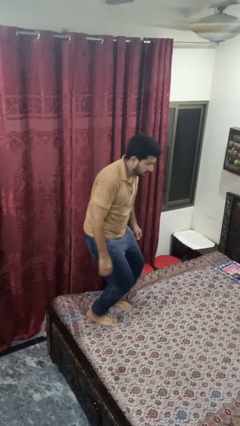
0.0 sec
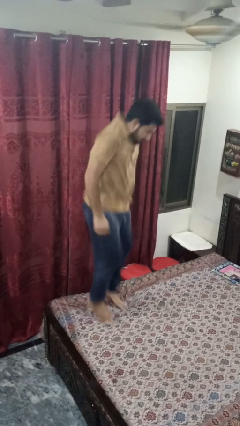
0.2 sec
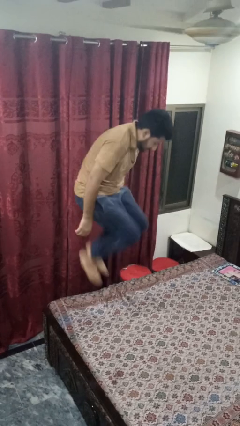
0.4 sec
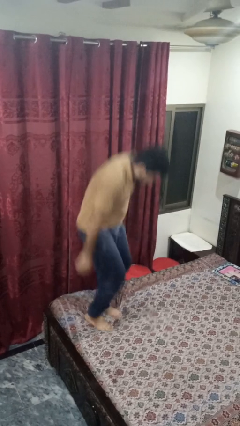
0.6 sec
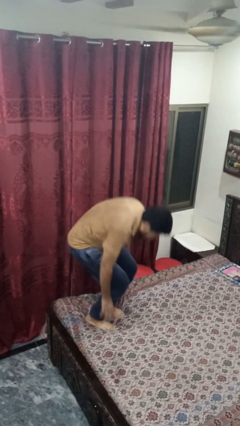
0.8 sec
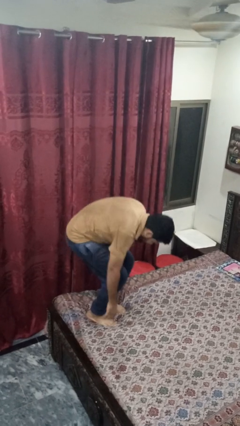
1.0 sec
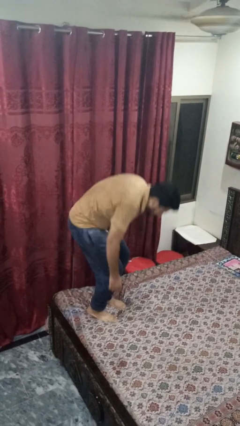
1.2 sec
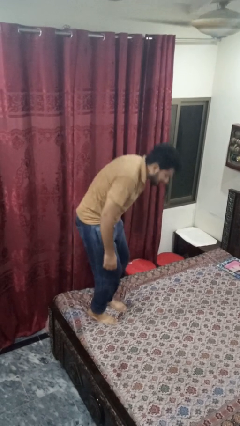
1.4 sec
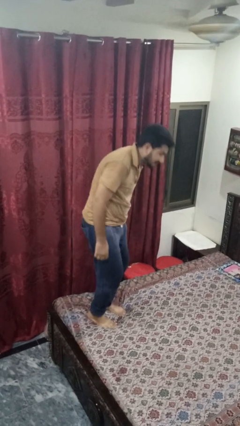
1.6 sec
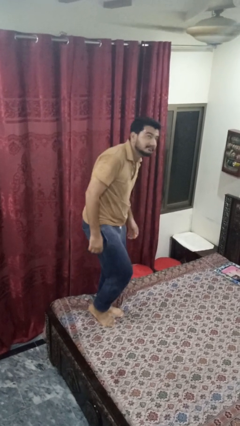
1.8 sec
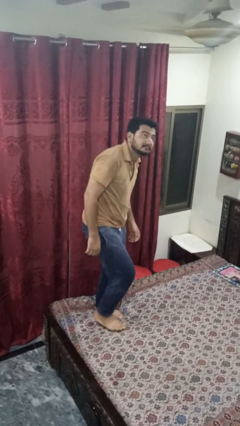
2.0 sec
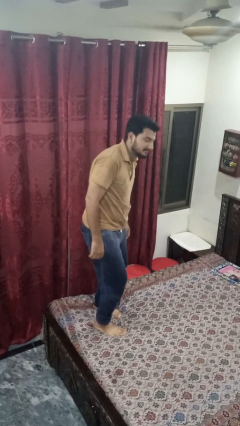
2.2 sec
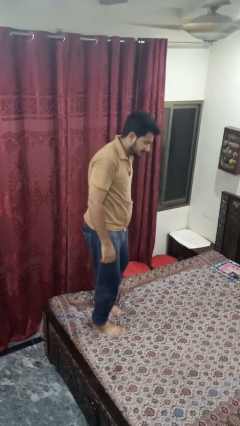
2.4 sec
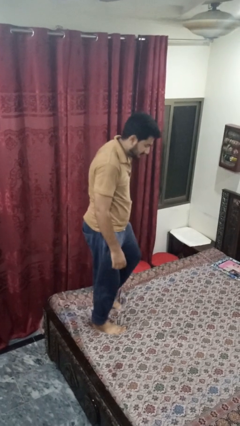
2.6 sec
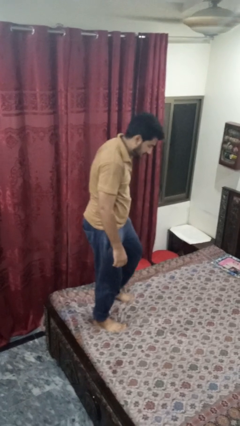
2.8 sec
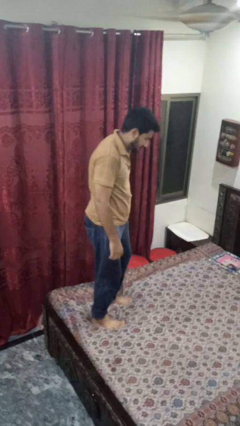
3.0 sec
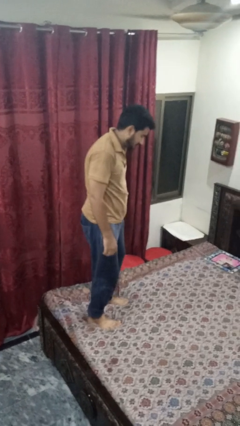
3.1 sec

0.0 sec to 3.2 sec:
person jumps on bed

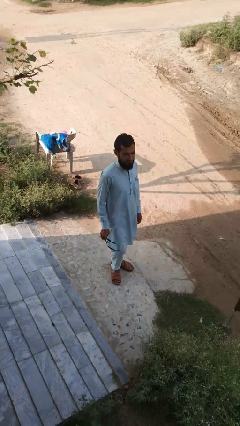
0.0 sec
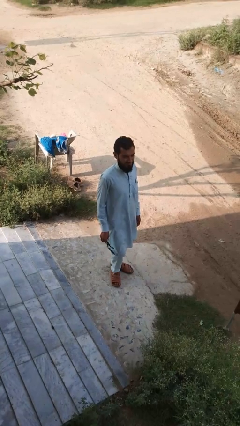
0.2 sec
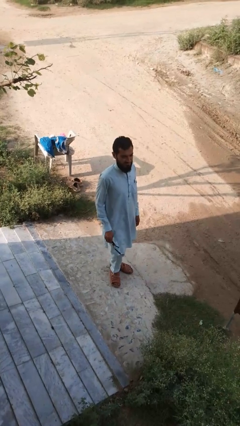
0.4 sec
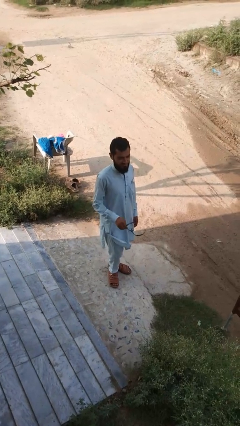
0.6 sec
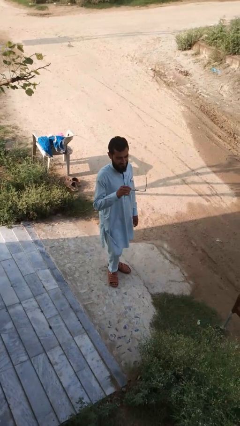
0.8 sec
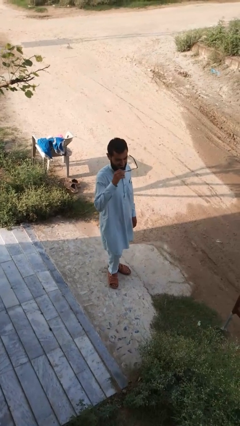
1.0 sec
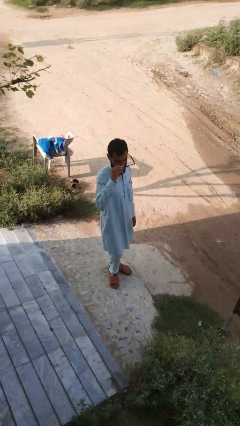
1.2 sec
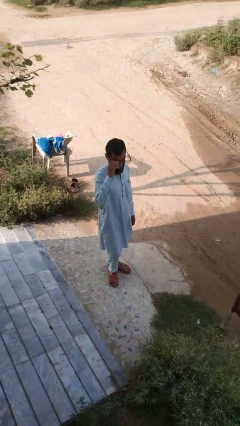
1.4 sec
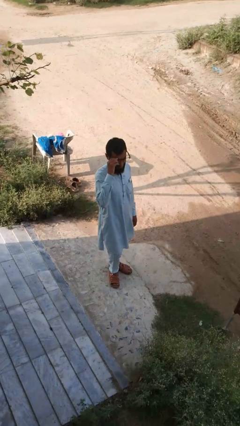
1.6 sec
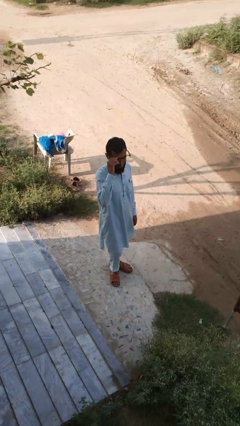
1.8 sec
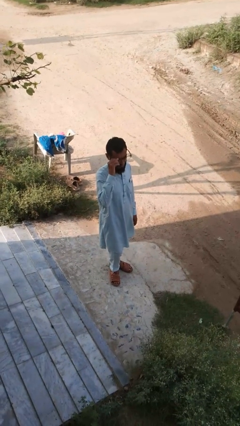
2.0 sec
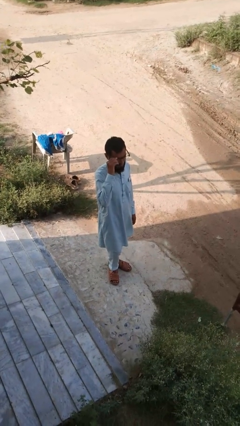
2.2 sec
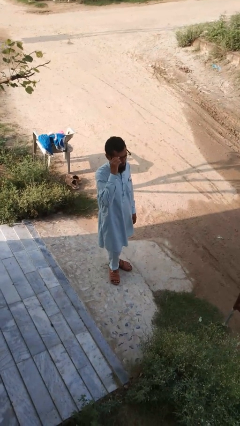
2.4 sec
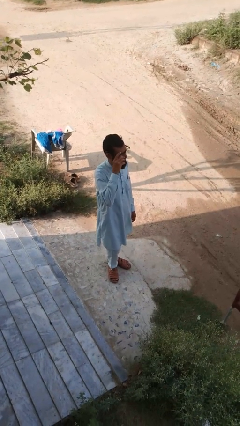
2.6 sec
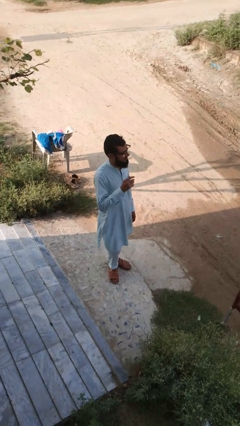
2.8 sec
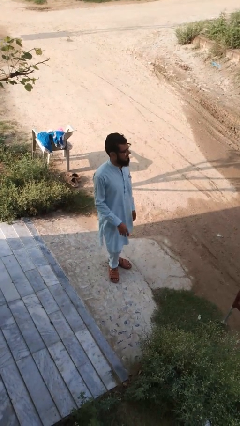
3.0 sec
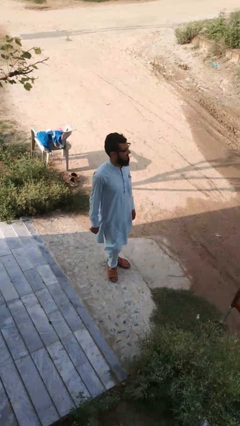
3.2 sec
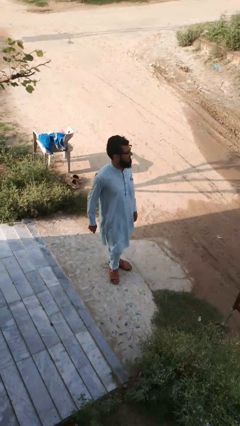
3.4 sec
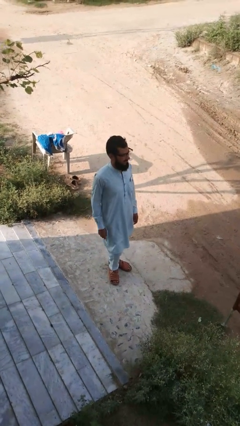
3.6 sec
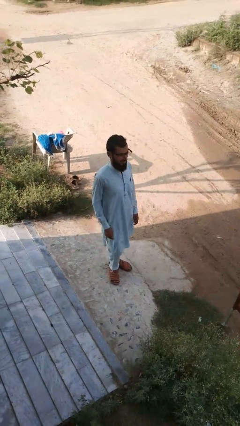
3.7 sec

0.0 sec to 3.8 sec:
person puts on glasses

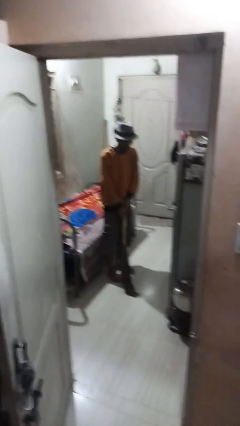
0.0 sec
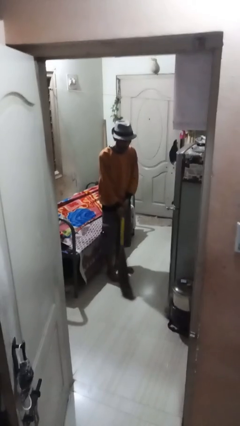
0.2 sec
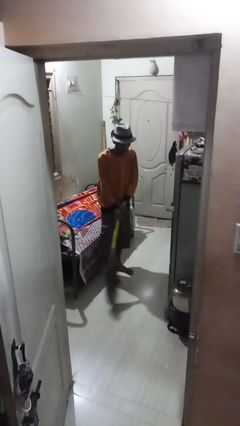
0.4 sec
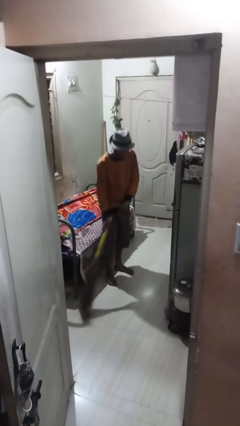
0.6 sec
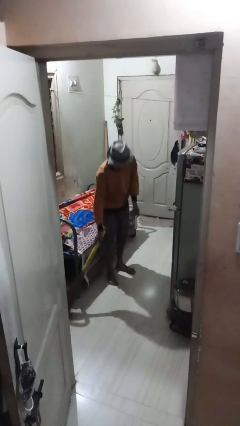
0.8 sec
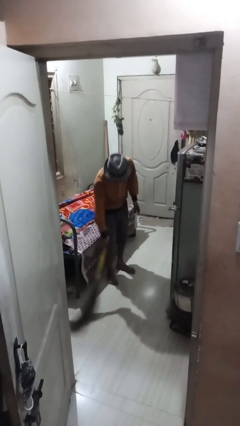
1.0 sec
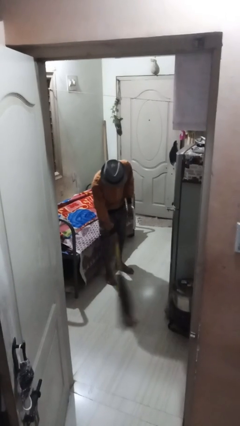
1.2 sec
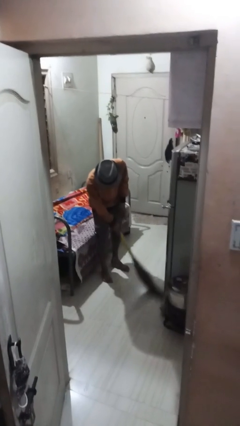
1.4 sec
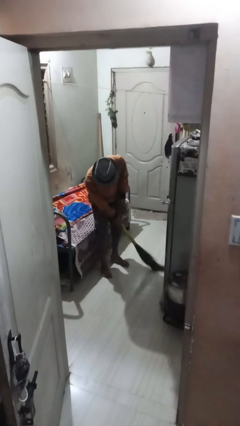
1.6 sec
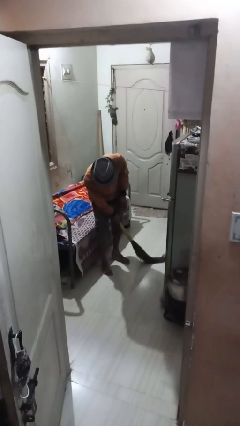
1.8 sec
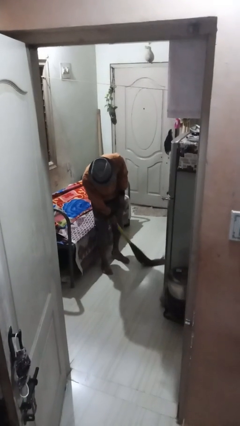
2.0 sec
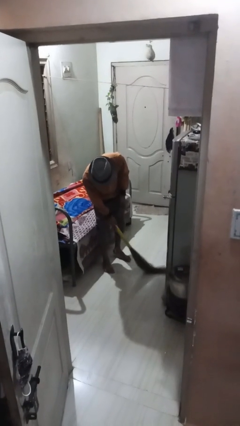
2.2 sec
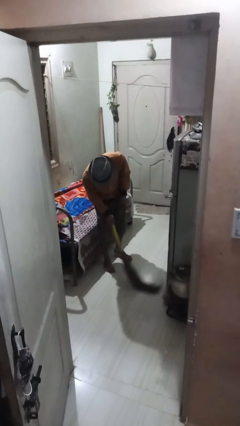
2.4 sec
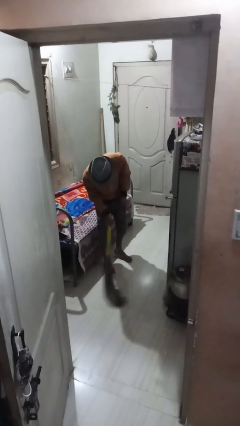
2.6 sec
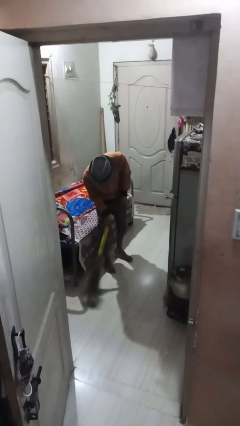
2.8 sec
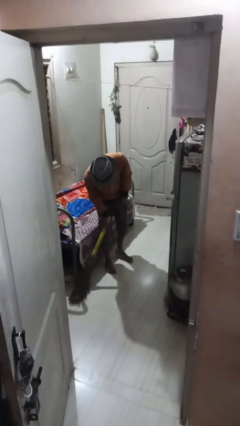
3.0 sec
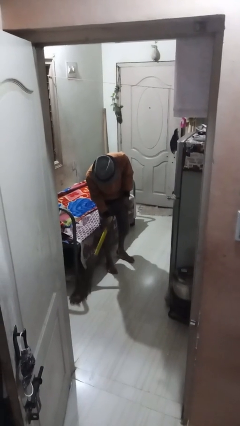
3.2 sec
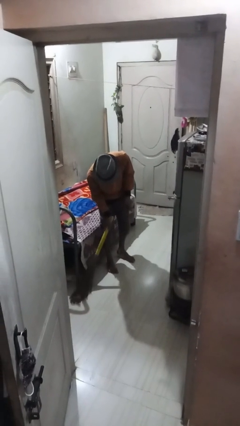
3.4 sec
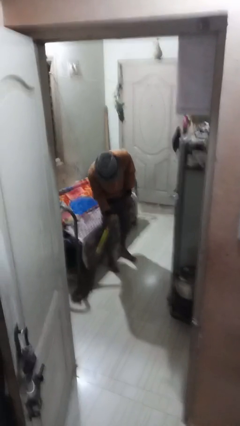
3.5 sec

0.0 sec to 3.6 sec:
person sweeps floor

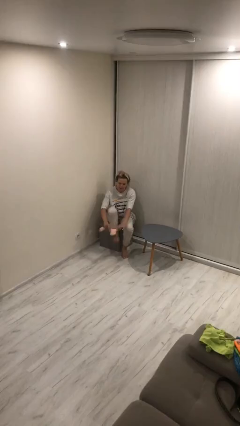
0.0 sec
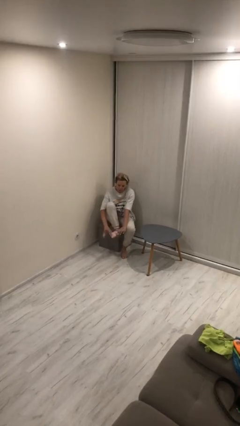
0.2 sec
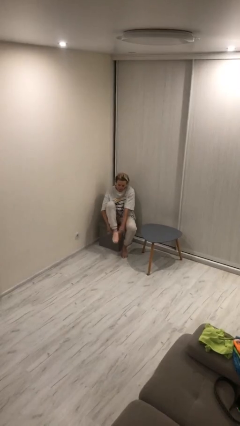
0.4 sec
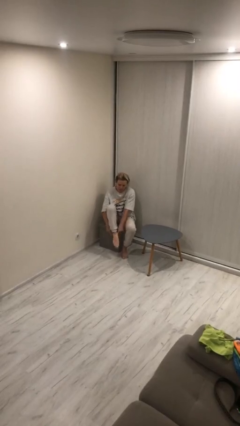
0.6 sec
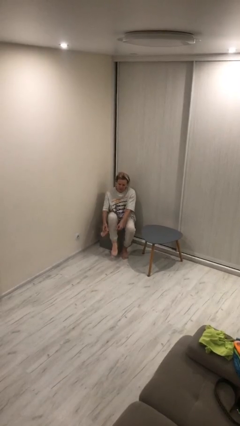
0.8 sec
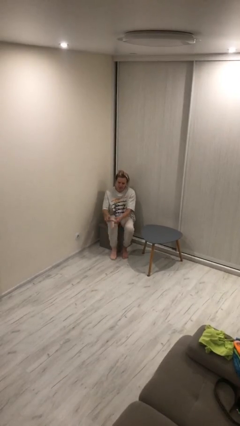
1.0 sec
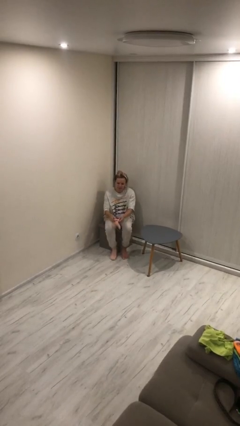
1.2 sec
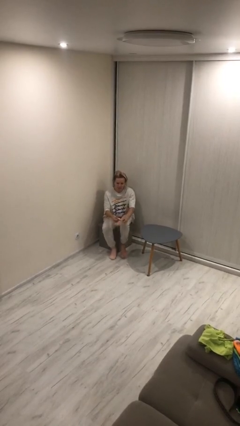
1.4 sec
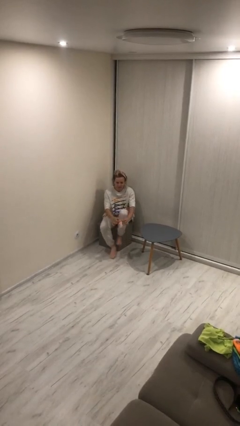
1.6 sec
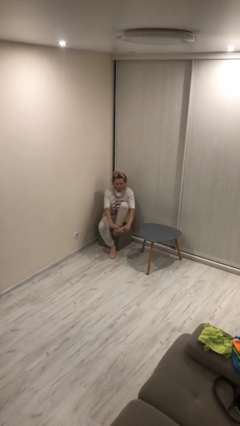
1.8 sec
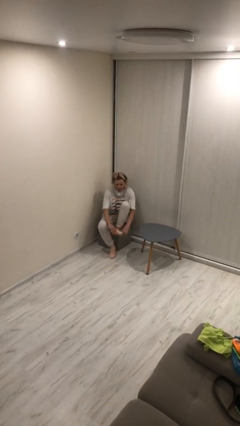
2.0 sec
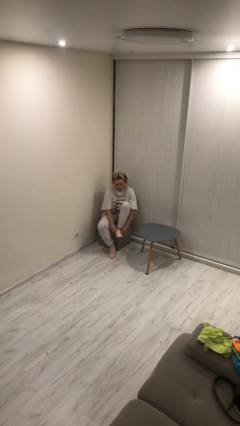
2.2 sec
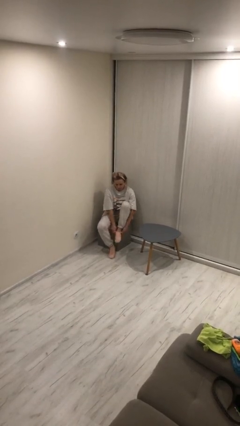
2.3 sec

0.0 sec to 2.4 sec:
person puts on socks

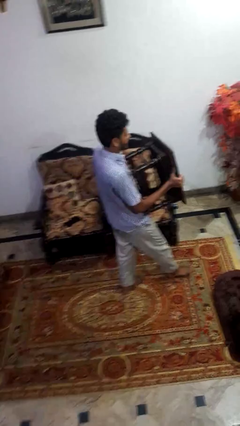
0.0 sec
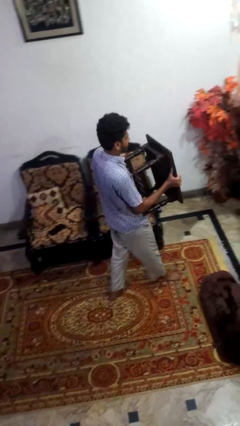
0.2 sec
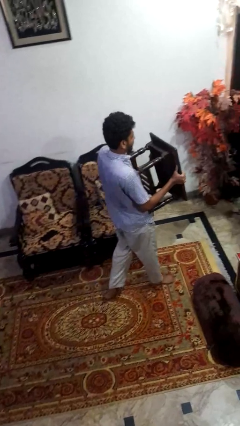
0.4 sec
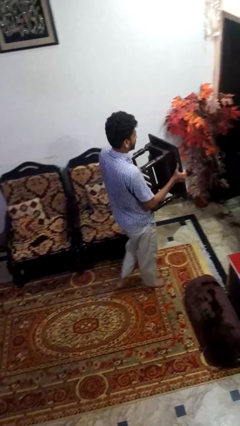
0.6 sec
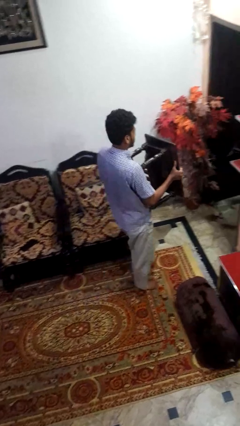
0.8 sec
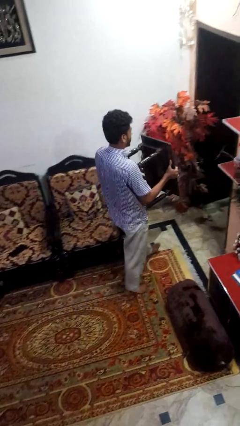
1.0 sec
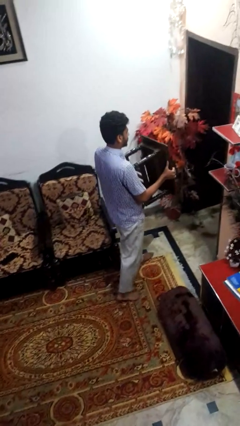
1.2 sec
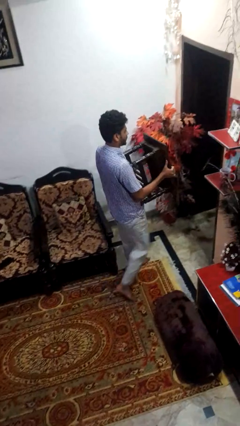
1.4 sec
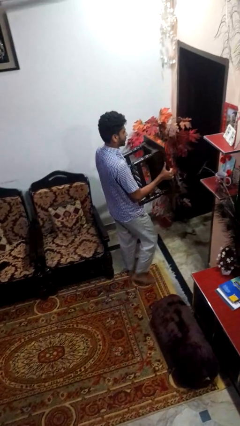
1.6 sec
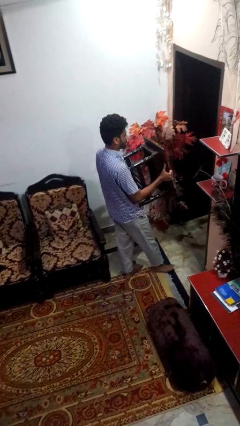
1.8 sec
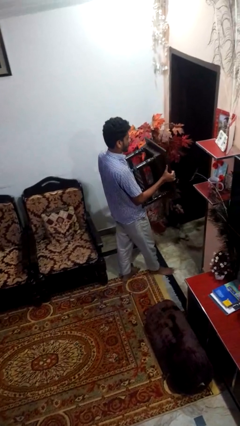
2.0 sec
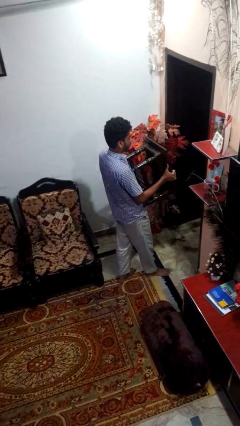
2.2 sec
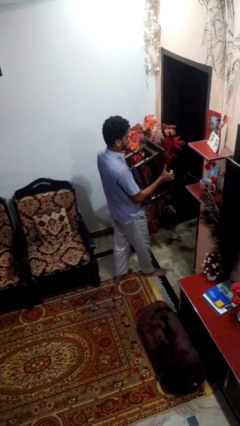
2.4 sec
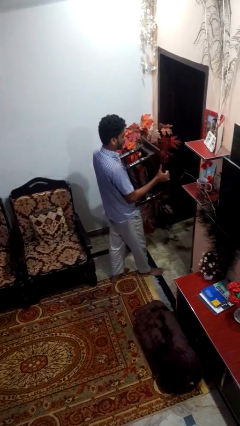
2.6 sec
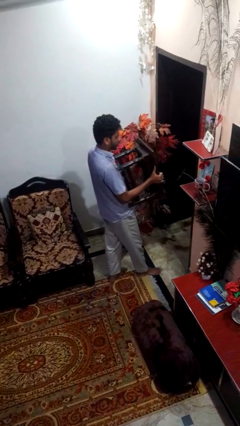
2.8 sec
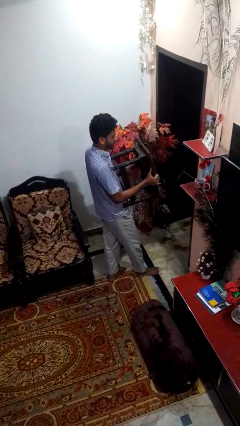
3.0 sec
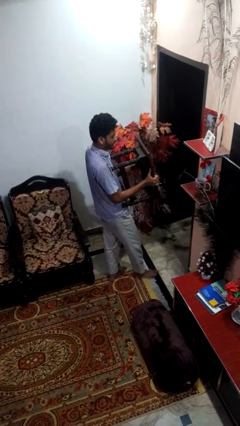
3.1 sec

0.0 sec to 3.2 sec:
person carries furniture

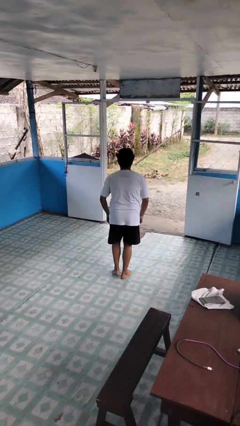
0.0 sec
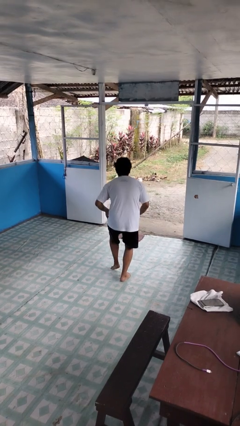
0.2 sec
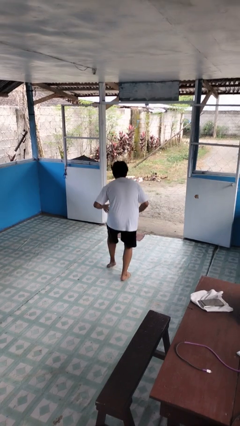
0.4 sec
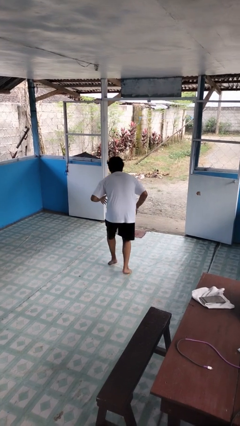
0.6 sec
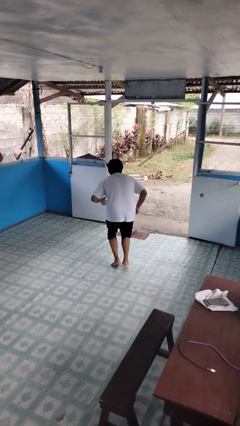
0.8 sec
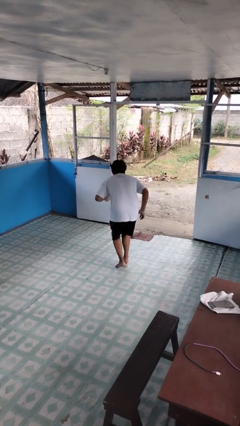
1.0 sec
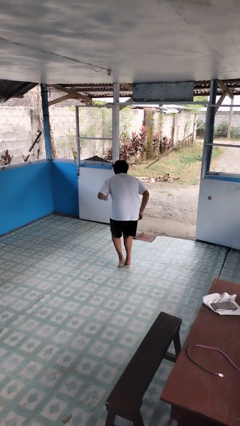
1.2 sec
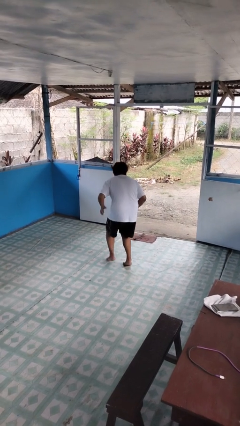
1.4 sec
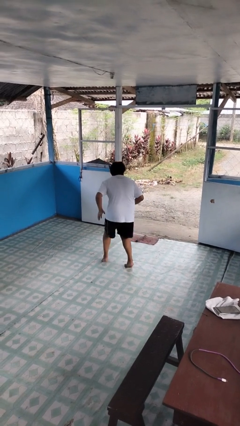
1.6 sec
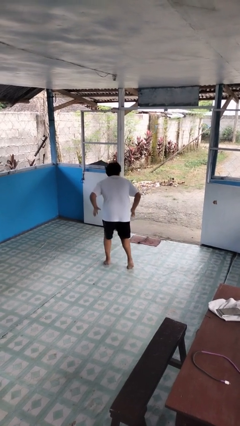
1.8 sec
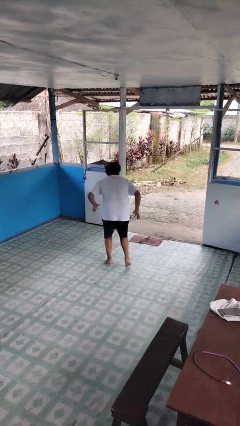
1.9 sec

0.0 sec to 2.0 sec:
person walks tiptoe
